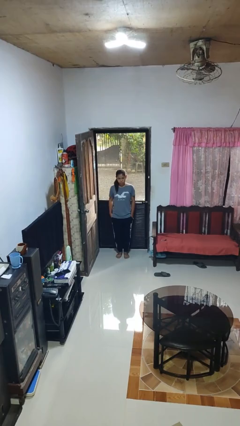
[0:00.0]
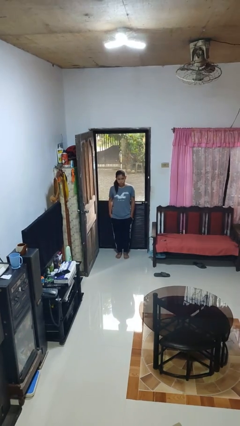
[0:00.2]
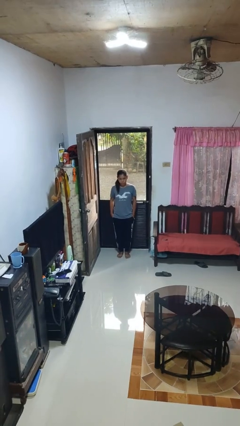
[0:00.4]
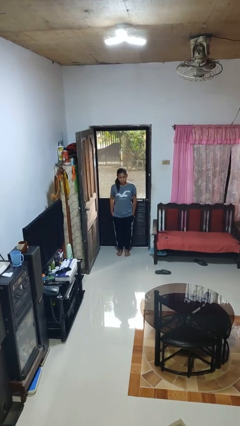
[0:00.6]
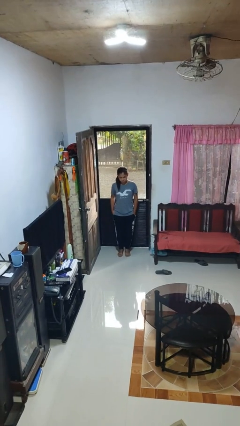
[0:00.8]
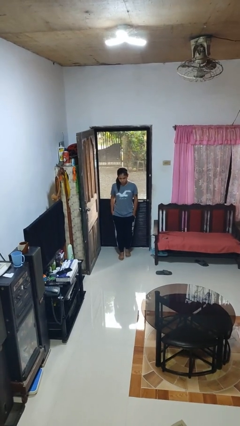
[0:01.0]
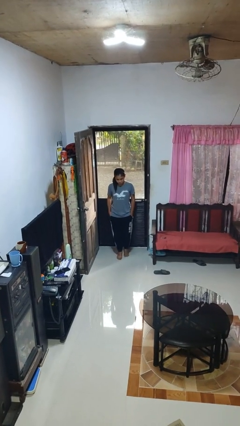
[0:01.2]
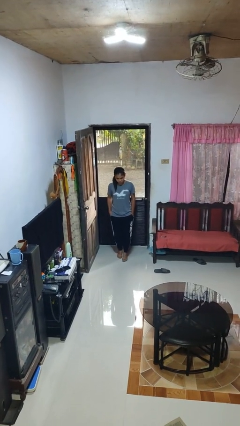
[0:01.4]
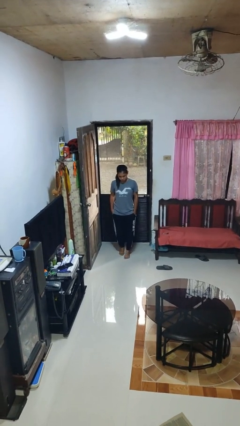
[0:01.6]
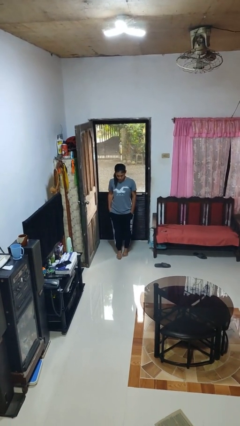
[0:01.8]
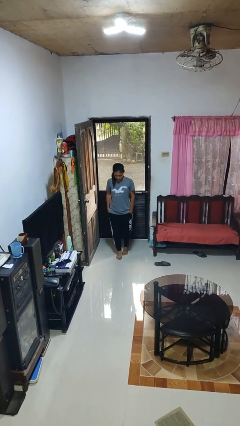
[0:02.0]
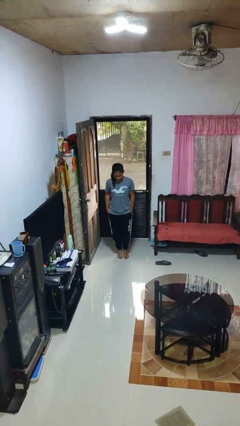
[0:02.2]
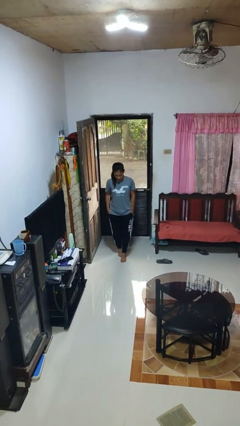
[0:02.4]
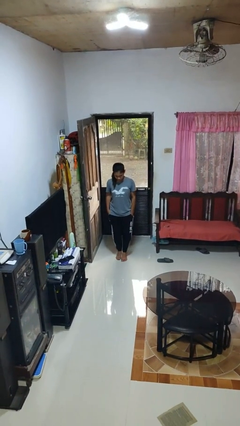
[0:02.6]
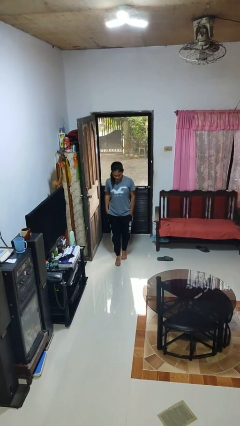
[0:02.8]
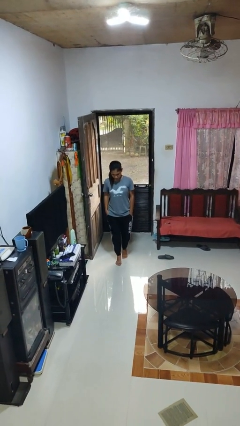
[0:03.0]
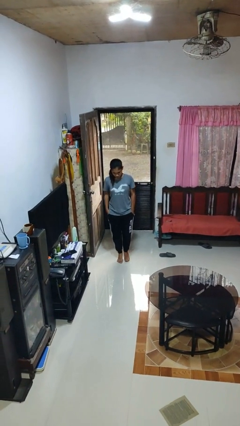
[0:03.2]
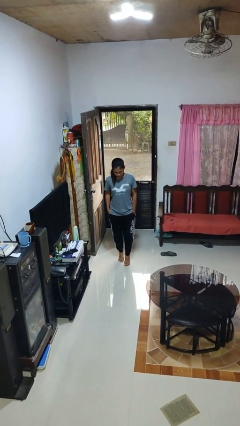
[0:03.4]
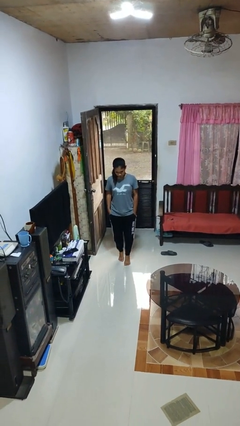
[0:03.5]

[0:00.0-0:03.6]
person walks tiptoe

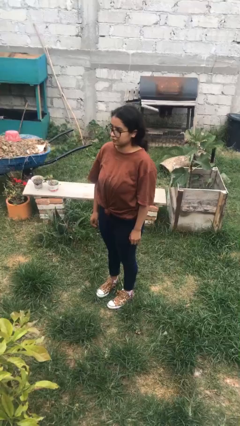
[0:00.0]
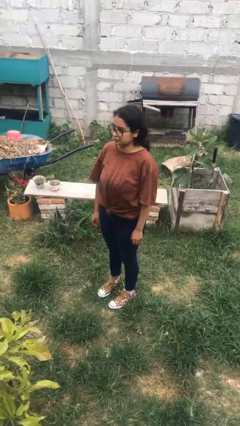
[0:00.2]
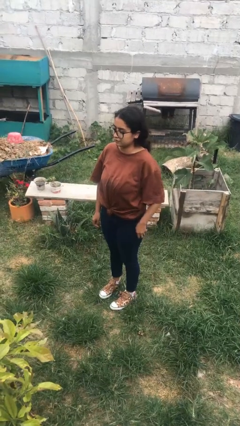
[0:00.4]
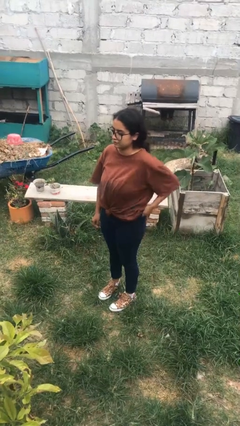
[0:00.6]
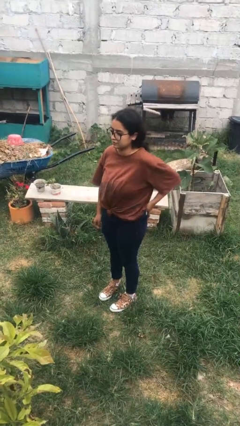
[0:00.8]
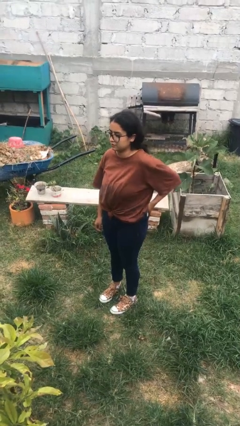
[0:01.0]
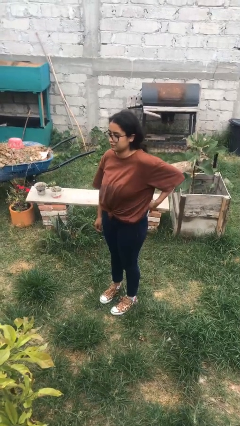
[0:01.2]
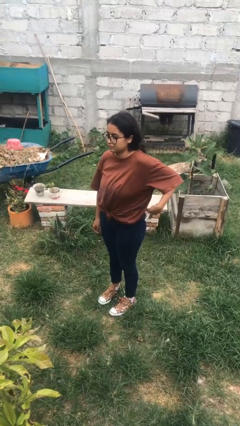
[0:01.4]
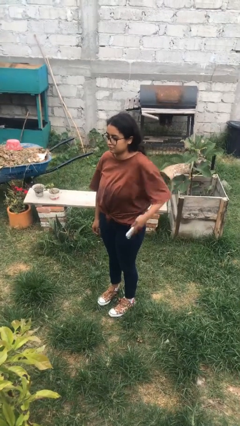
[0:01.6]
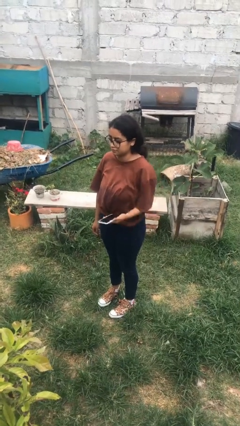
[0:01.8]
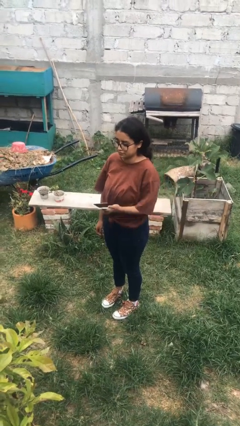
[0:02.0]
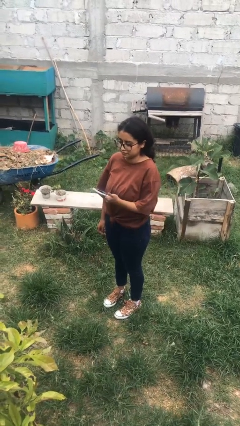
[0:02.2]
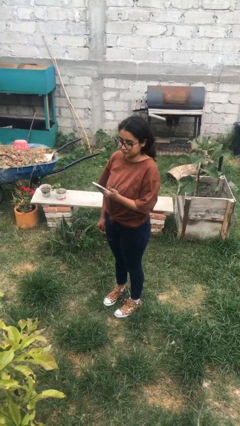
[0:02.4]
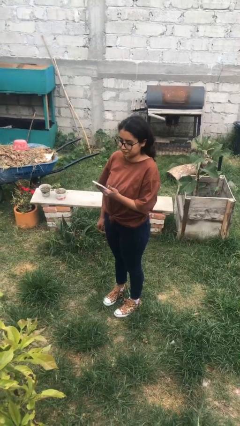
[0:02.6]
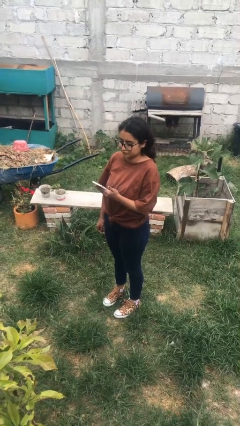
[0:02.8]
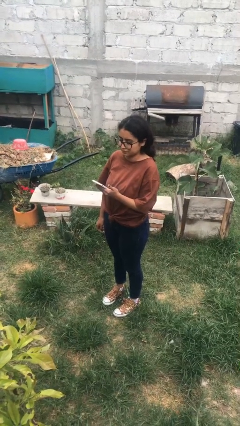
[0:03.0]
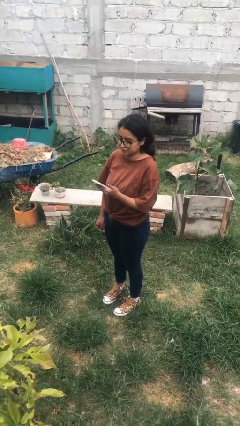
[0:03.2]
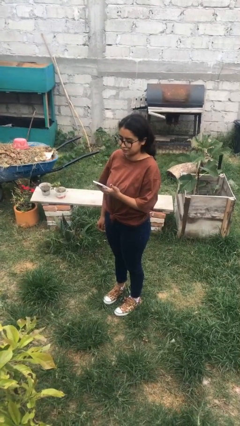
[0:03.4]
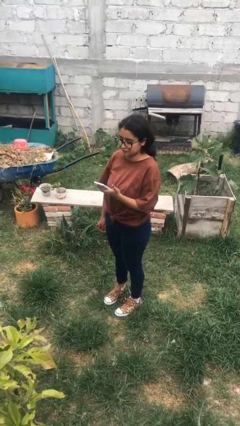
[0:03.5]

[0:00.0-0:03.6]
person takes phone from pocket

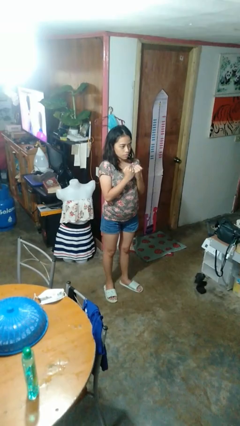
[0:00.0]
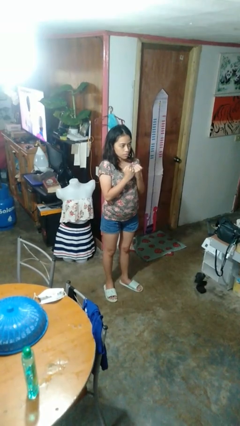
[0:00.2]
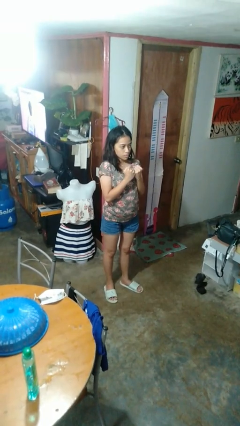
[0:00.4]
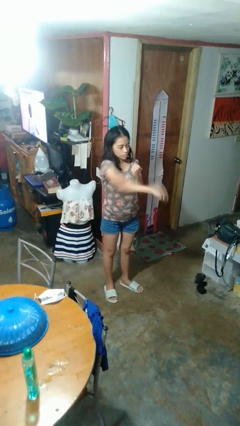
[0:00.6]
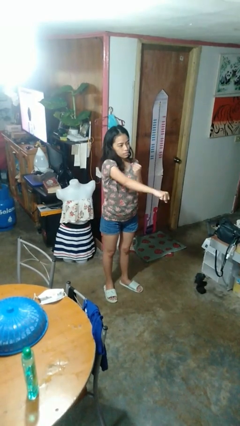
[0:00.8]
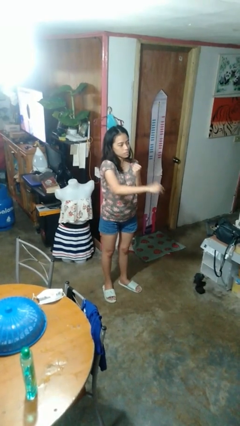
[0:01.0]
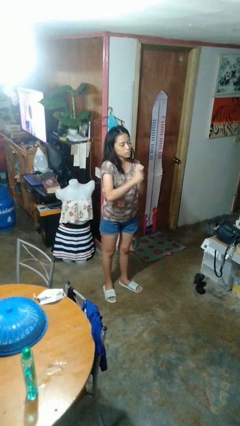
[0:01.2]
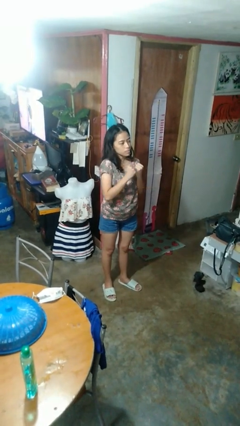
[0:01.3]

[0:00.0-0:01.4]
person punches

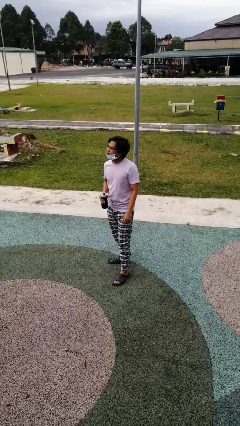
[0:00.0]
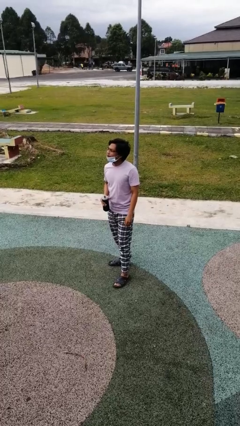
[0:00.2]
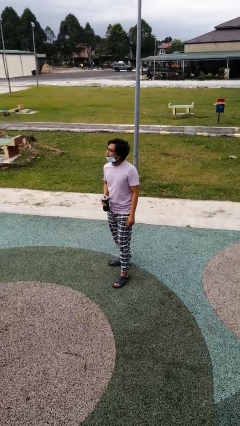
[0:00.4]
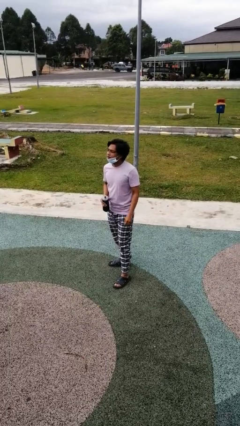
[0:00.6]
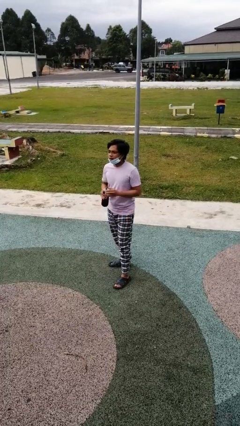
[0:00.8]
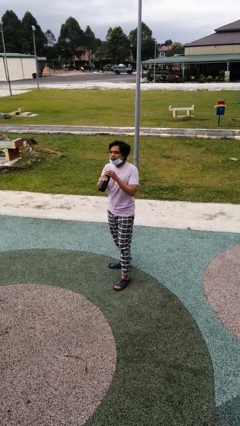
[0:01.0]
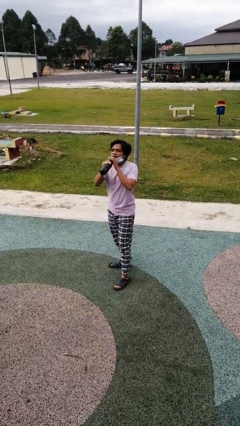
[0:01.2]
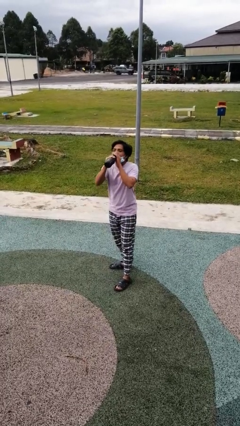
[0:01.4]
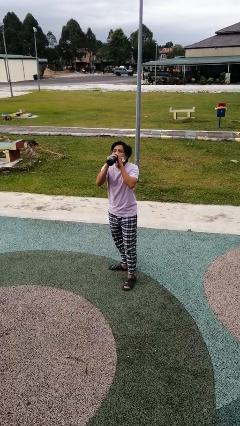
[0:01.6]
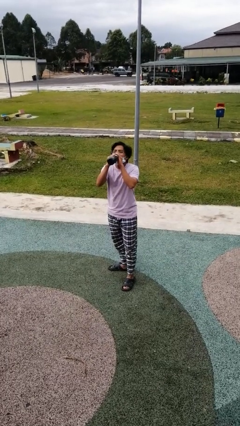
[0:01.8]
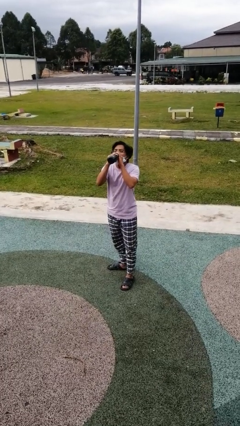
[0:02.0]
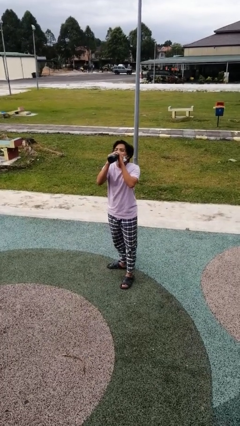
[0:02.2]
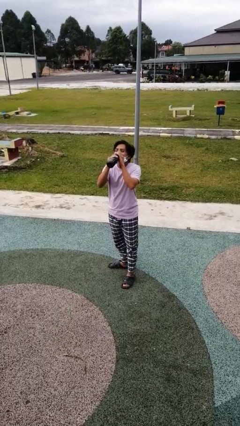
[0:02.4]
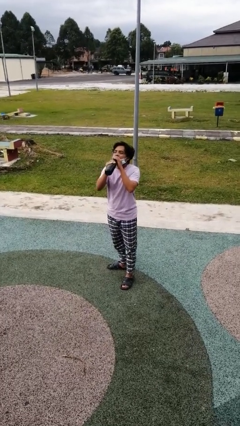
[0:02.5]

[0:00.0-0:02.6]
person drinks from bottle

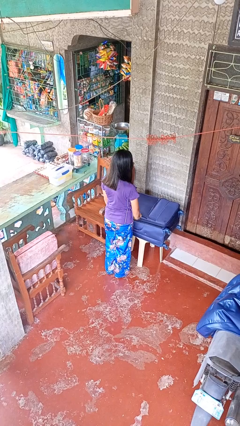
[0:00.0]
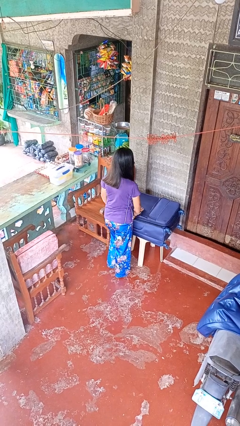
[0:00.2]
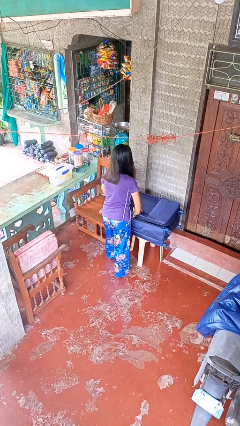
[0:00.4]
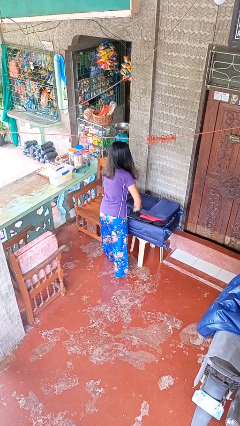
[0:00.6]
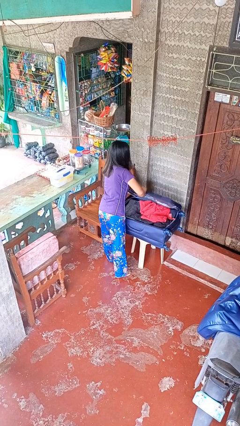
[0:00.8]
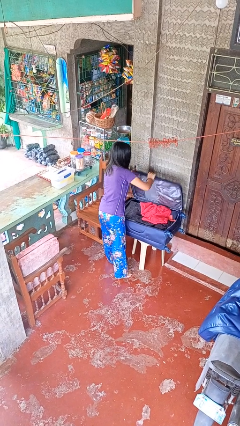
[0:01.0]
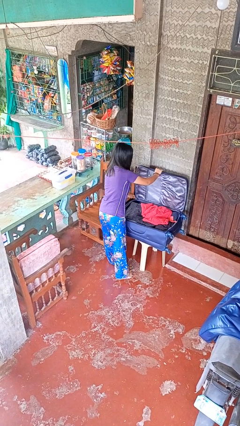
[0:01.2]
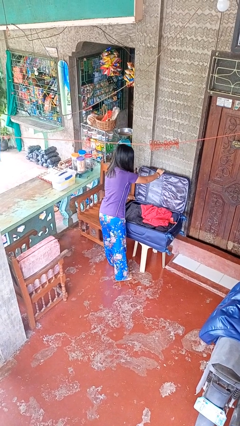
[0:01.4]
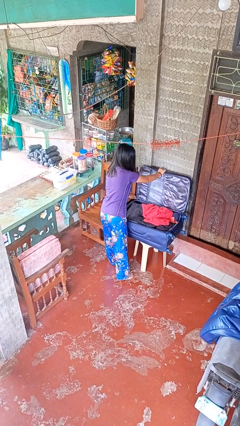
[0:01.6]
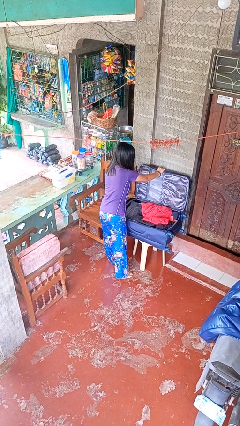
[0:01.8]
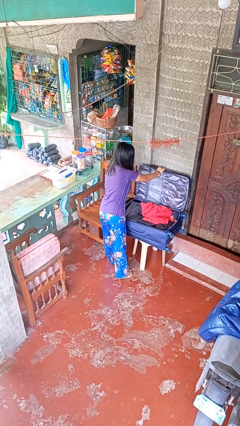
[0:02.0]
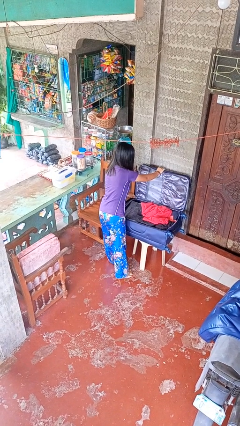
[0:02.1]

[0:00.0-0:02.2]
person opens suitcase

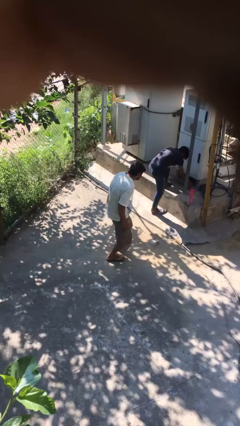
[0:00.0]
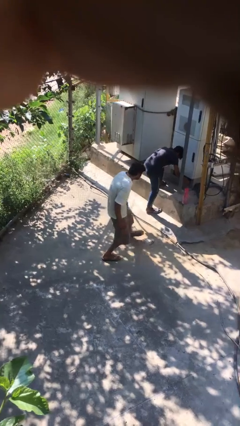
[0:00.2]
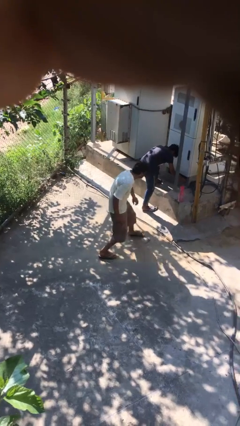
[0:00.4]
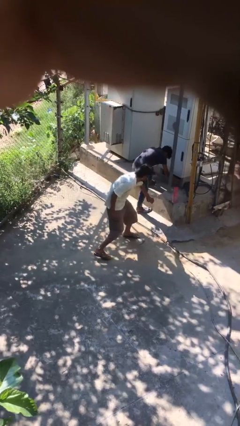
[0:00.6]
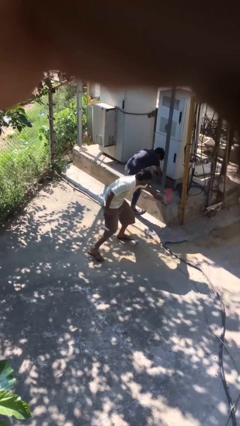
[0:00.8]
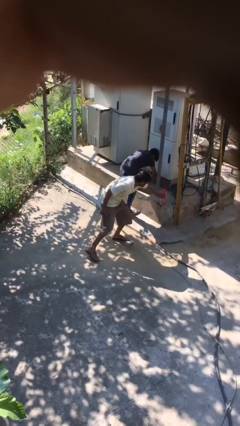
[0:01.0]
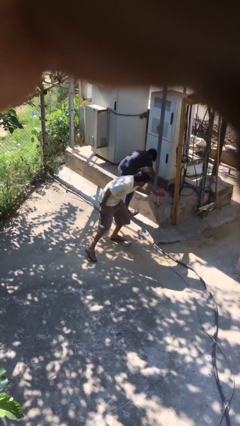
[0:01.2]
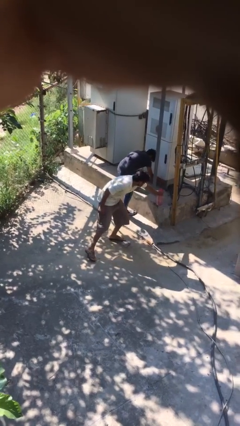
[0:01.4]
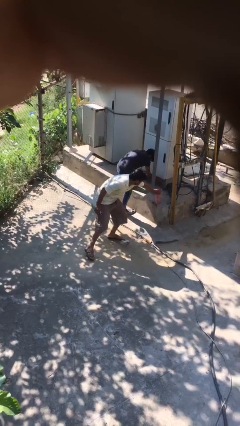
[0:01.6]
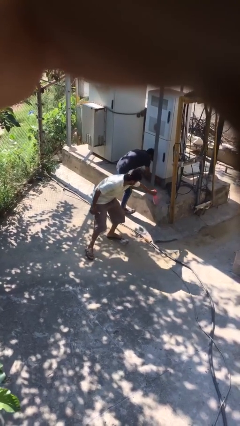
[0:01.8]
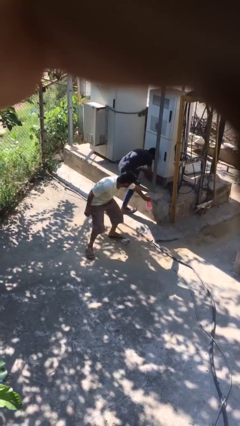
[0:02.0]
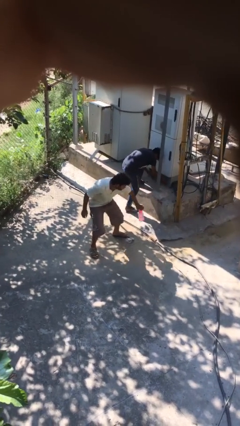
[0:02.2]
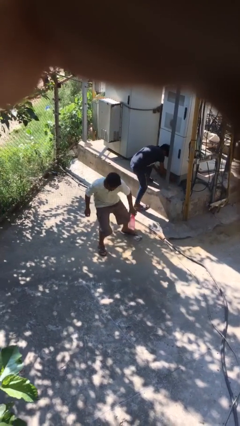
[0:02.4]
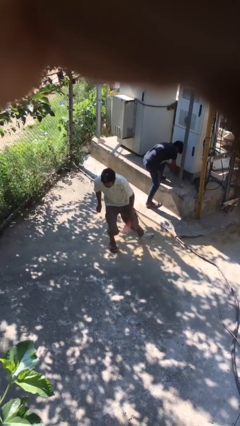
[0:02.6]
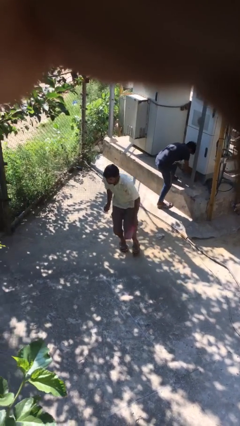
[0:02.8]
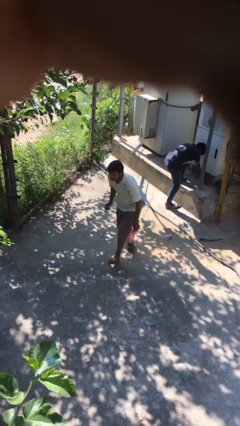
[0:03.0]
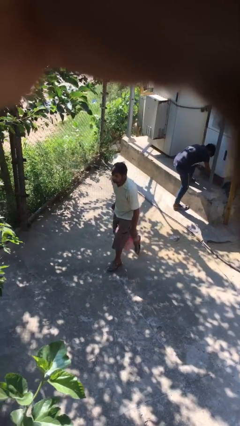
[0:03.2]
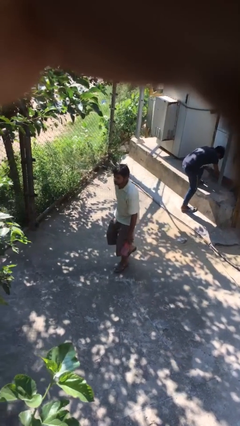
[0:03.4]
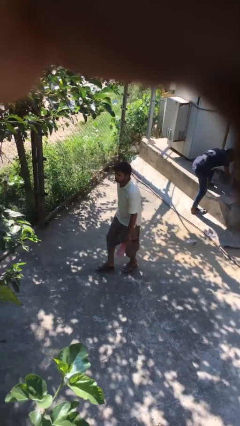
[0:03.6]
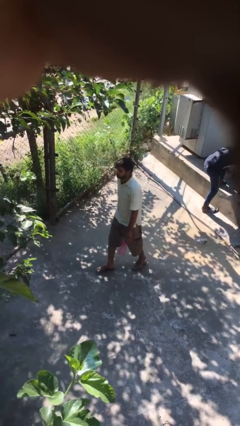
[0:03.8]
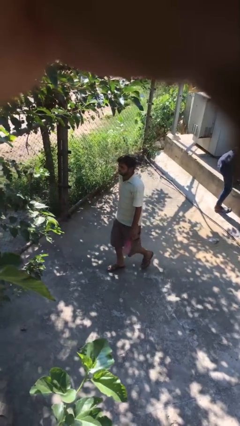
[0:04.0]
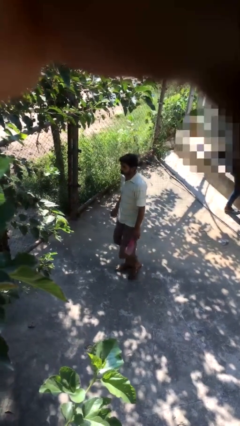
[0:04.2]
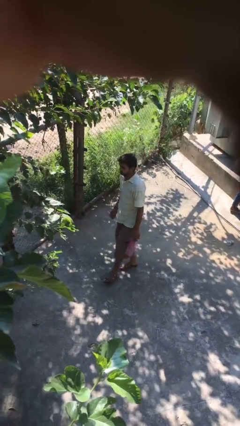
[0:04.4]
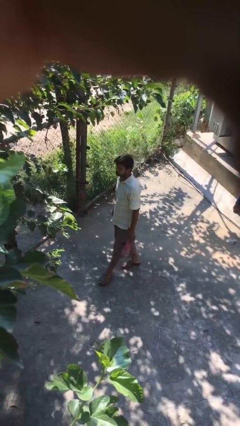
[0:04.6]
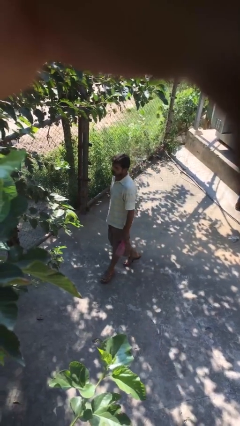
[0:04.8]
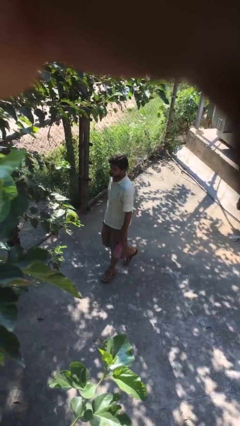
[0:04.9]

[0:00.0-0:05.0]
person steals object from person
